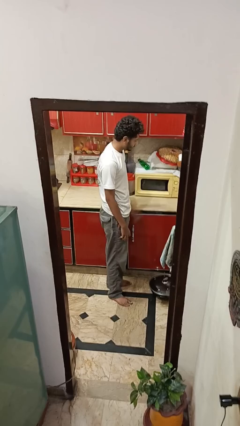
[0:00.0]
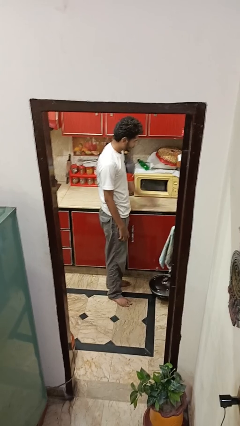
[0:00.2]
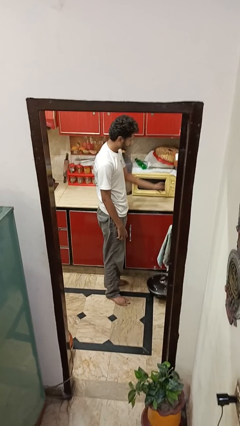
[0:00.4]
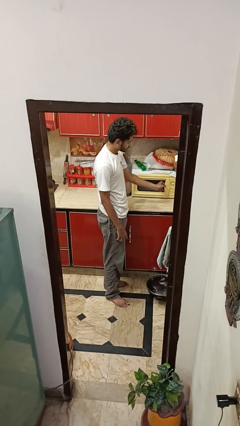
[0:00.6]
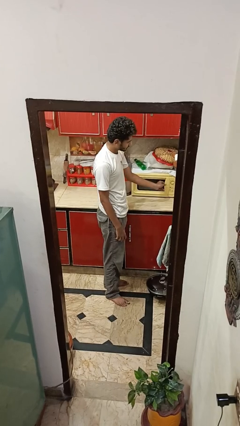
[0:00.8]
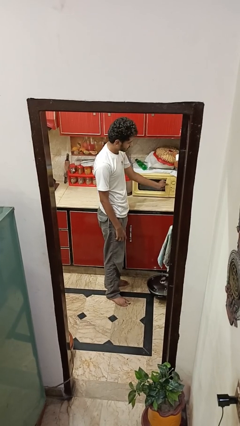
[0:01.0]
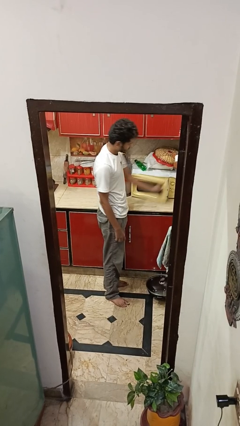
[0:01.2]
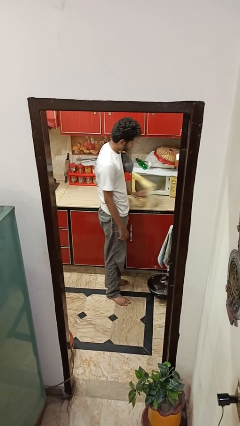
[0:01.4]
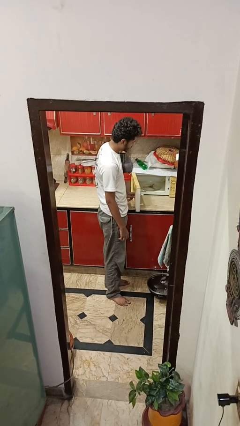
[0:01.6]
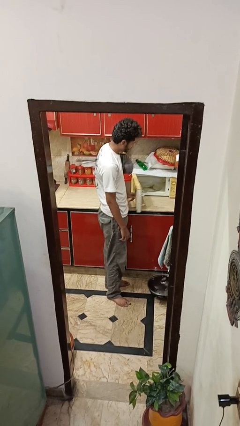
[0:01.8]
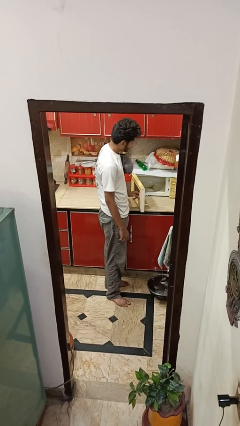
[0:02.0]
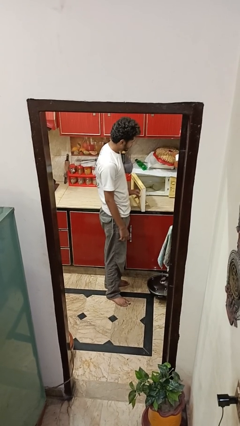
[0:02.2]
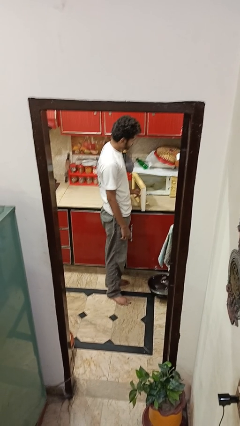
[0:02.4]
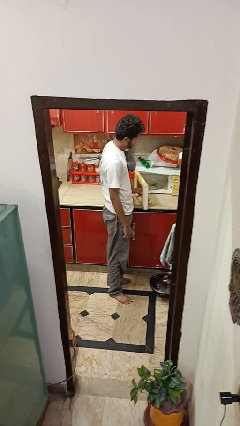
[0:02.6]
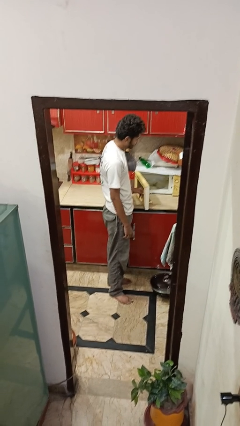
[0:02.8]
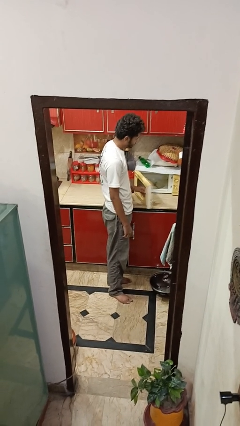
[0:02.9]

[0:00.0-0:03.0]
person opens oven door

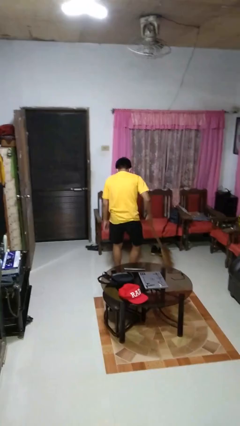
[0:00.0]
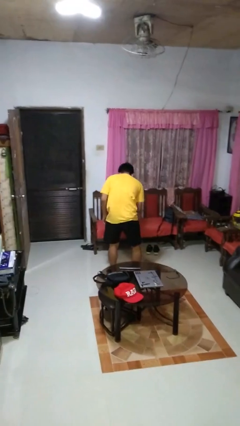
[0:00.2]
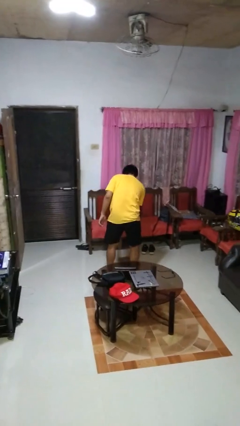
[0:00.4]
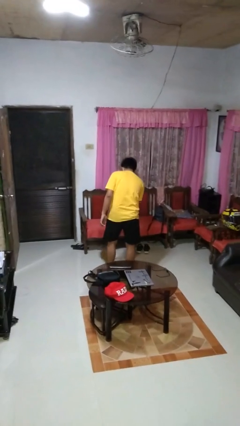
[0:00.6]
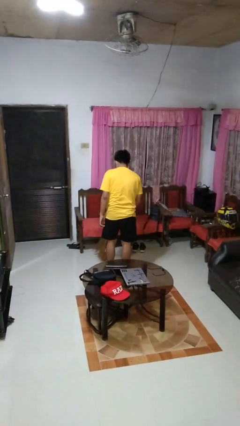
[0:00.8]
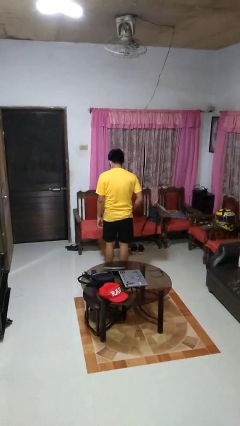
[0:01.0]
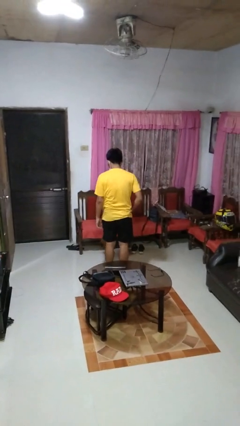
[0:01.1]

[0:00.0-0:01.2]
person sweeps floor

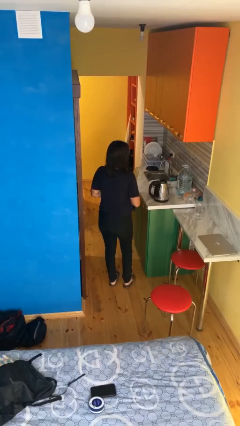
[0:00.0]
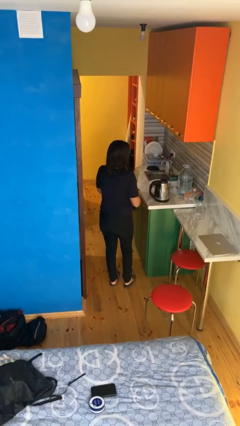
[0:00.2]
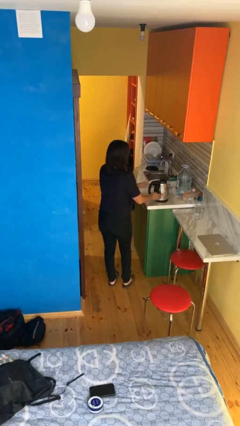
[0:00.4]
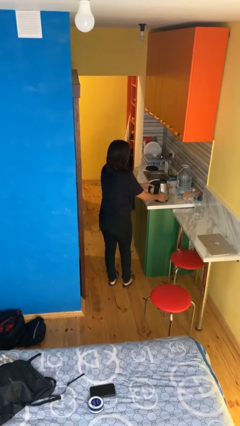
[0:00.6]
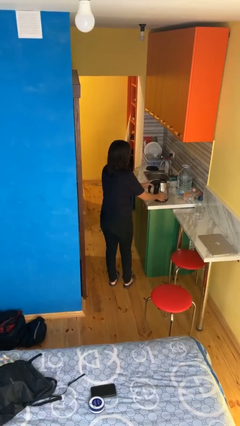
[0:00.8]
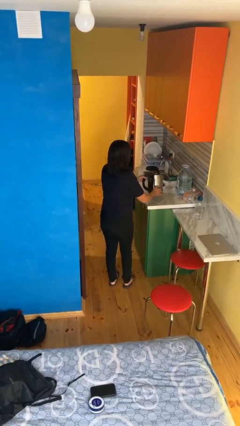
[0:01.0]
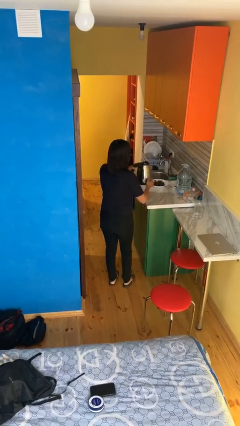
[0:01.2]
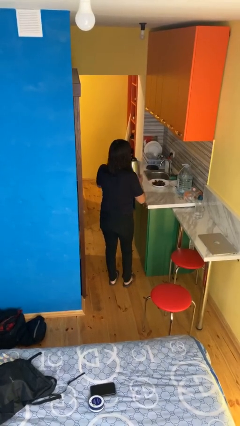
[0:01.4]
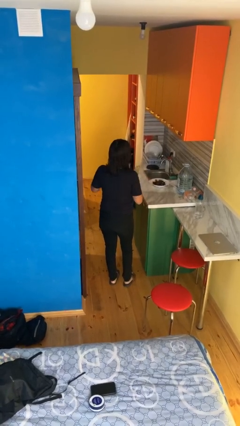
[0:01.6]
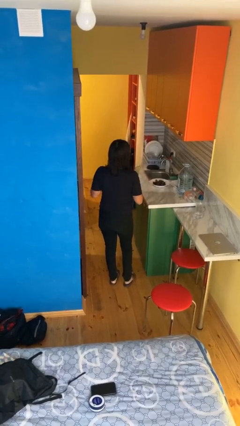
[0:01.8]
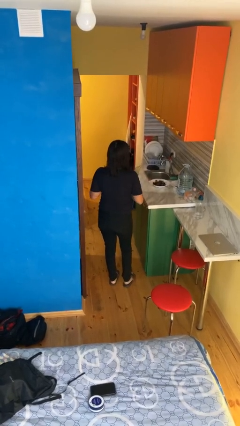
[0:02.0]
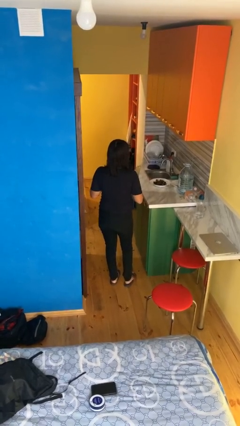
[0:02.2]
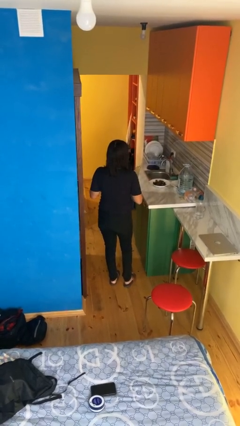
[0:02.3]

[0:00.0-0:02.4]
person picks up object from countertop

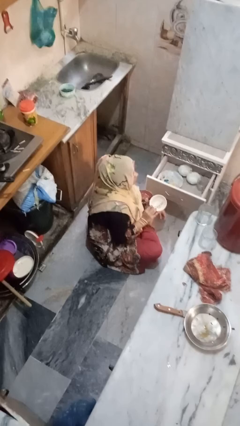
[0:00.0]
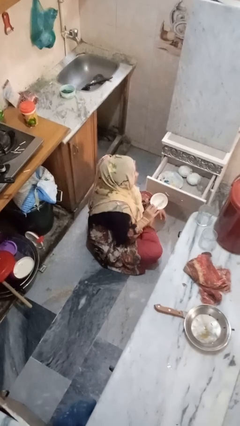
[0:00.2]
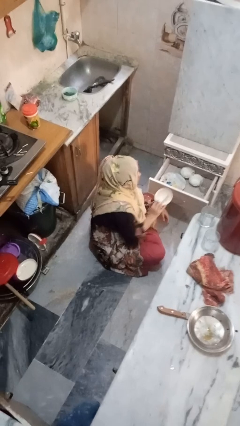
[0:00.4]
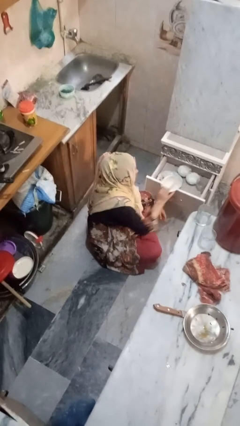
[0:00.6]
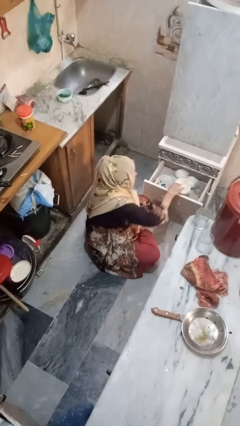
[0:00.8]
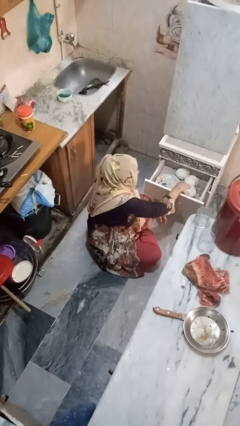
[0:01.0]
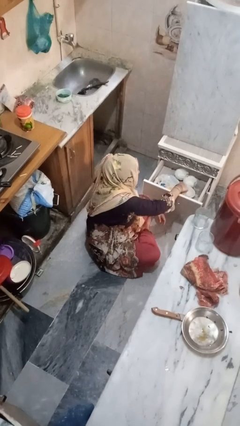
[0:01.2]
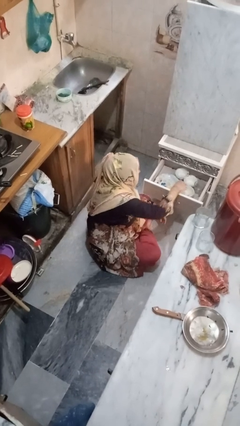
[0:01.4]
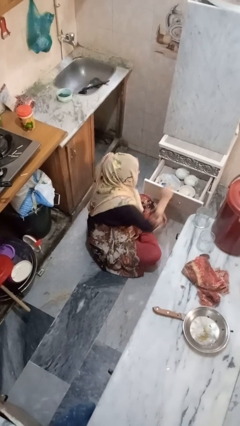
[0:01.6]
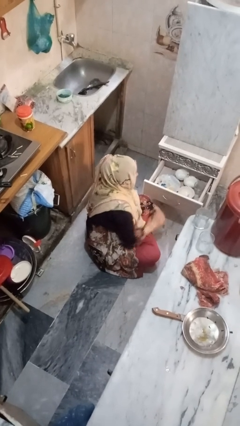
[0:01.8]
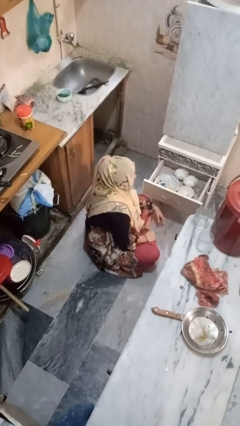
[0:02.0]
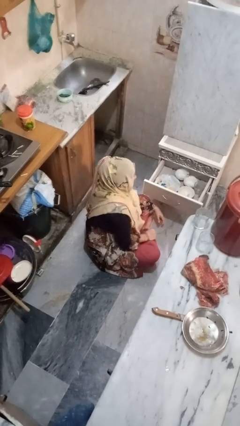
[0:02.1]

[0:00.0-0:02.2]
person puts object into kitchen drawer

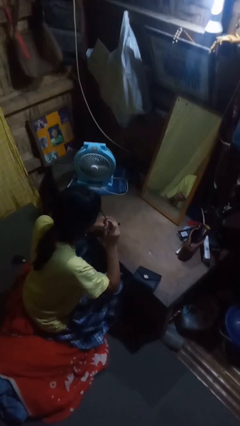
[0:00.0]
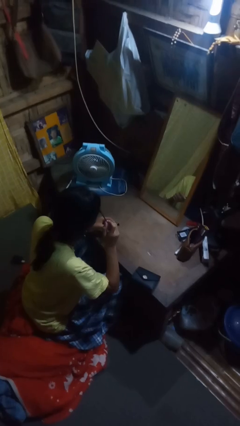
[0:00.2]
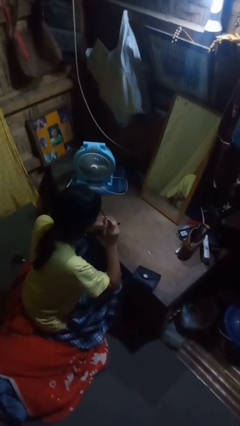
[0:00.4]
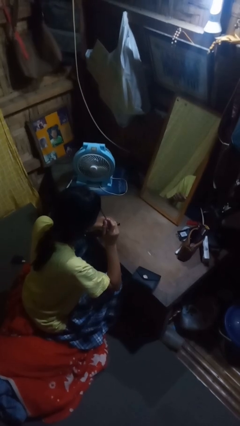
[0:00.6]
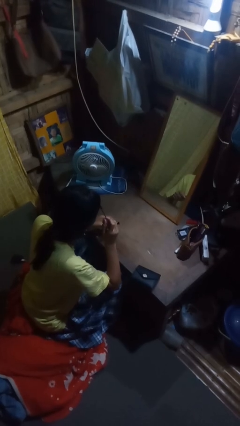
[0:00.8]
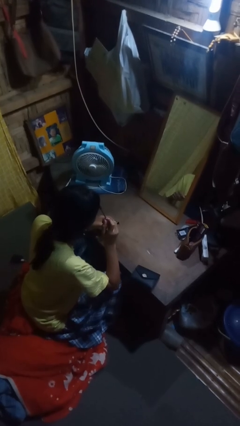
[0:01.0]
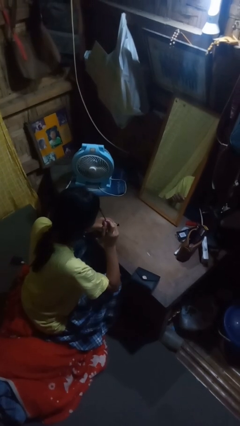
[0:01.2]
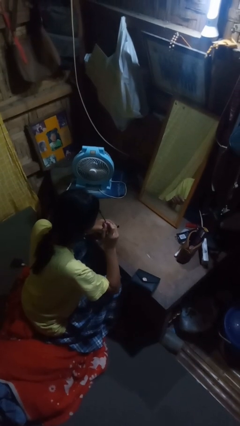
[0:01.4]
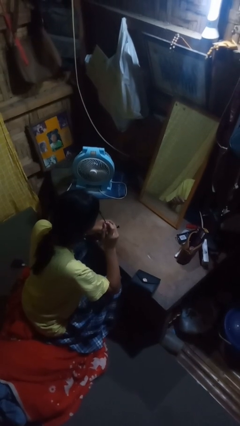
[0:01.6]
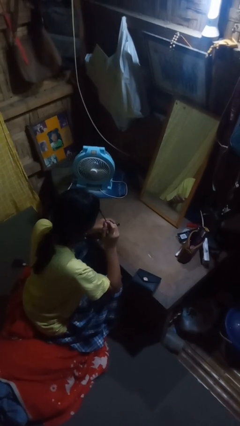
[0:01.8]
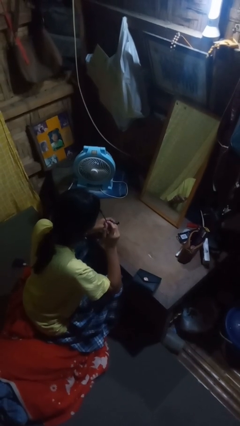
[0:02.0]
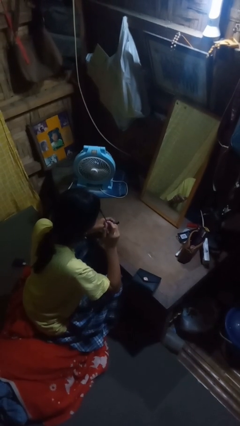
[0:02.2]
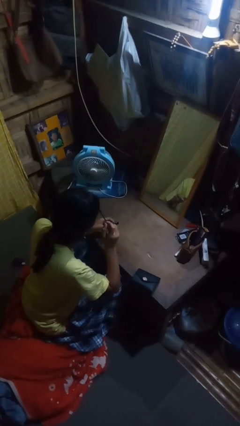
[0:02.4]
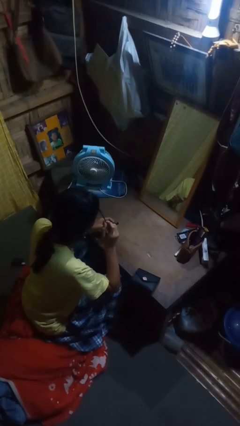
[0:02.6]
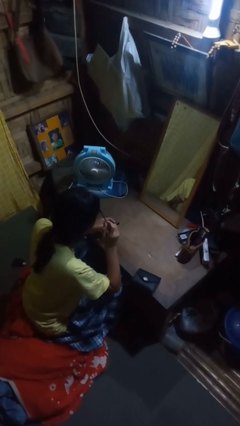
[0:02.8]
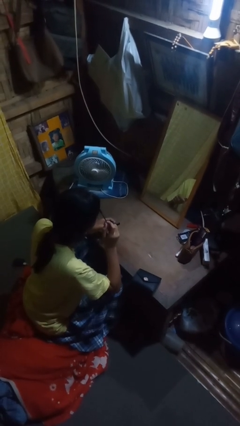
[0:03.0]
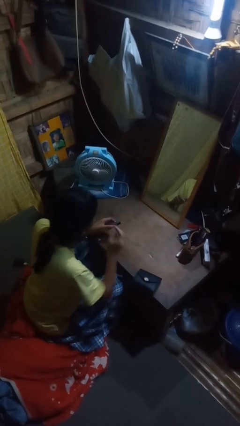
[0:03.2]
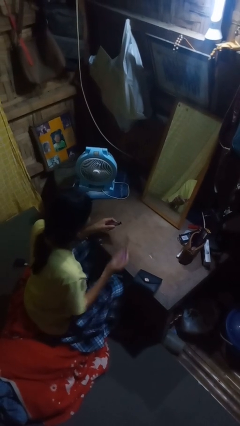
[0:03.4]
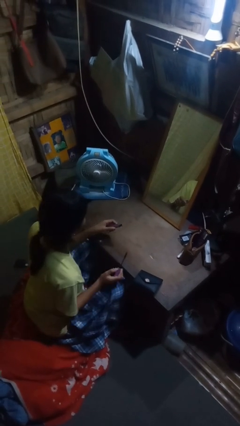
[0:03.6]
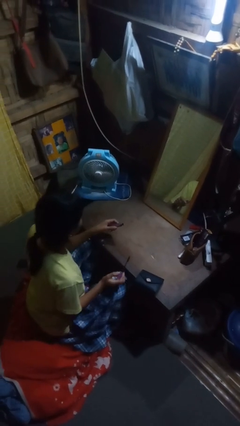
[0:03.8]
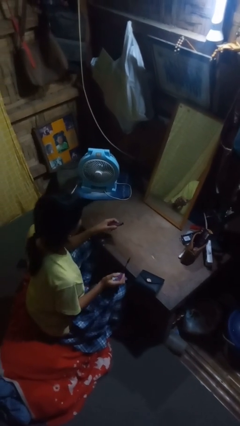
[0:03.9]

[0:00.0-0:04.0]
person applies eye makeup

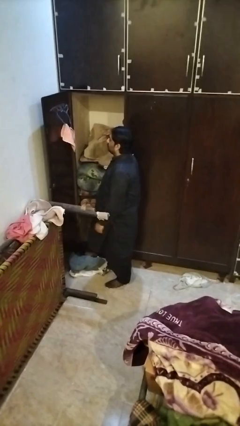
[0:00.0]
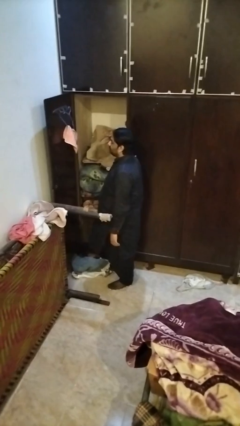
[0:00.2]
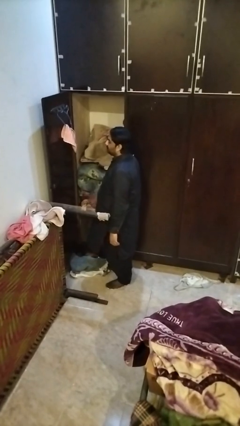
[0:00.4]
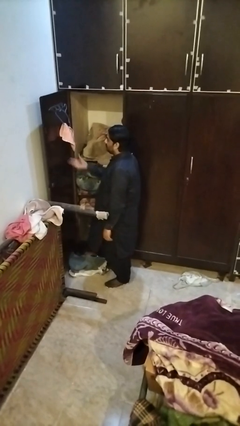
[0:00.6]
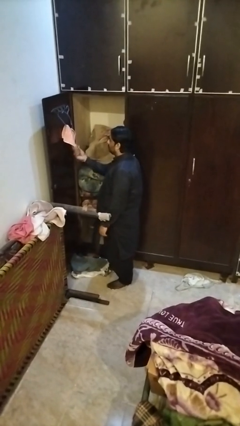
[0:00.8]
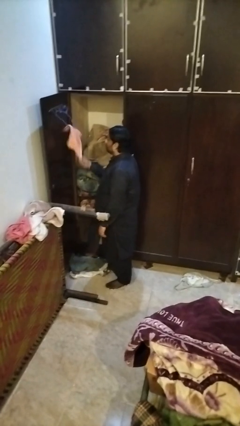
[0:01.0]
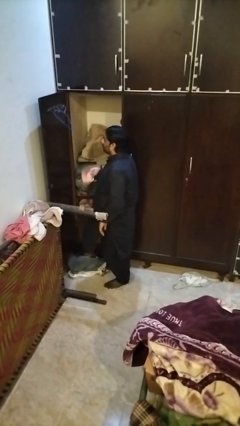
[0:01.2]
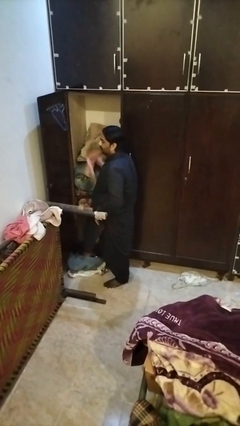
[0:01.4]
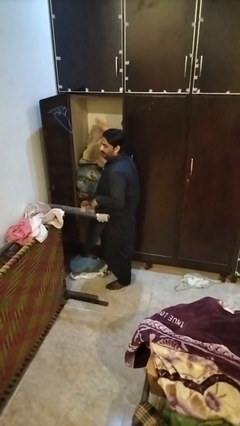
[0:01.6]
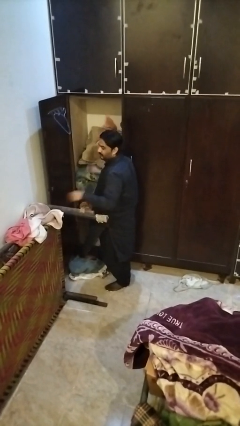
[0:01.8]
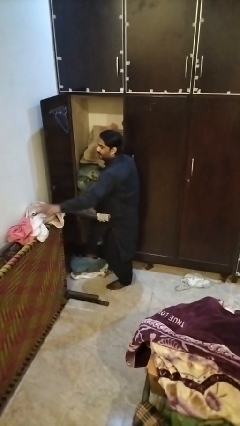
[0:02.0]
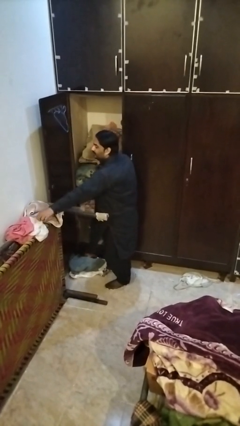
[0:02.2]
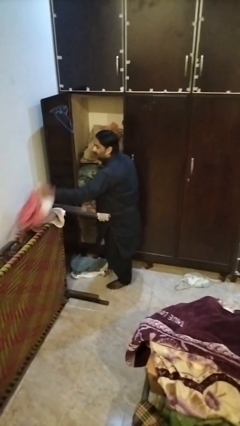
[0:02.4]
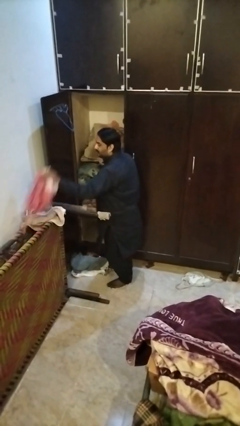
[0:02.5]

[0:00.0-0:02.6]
person takes clothes from closet

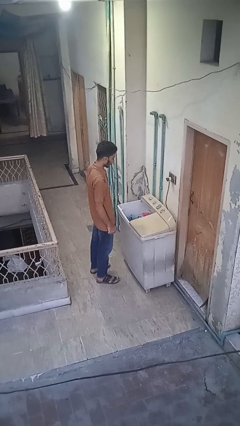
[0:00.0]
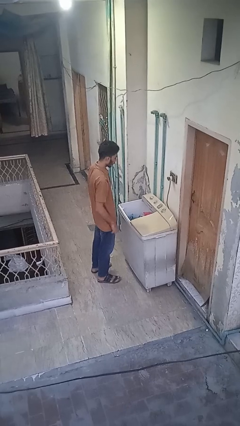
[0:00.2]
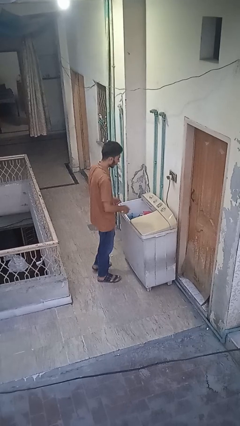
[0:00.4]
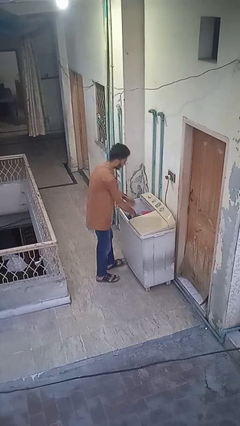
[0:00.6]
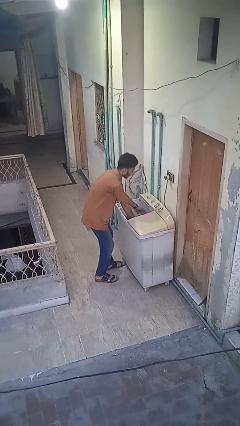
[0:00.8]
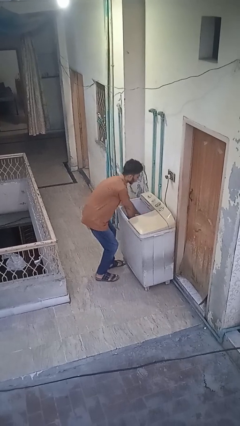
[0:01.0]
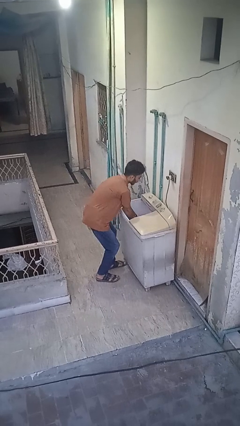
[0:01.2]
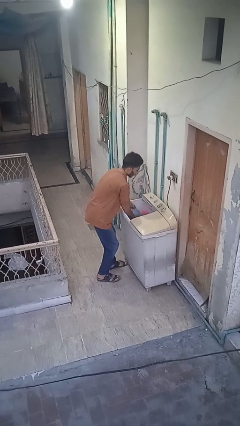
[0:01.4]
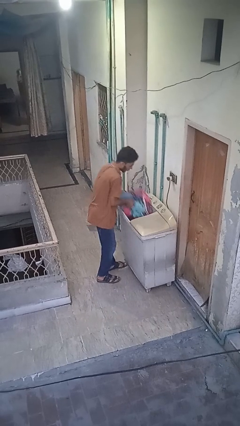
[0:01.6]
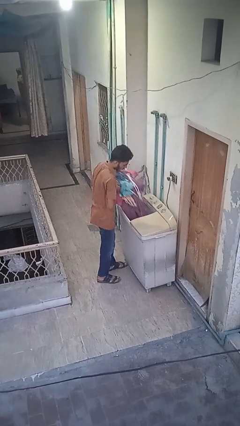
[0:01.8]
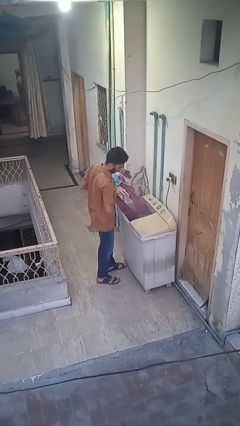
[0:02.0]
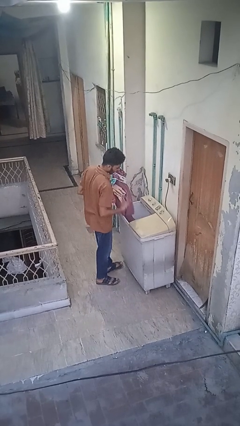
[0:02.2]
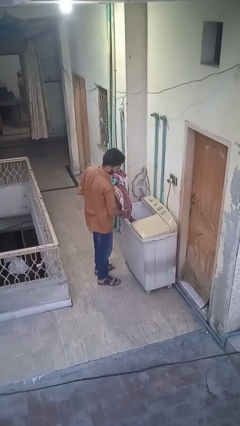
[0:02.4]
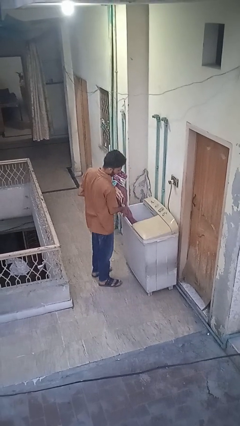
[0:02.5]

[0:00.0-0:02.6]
person unloads clotheswasher
